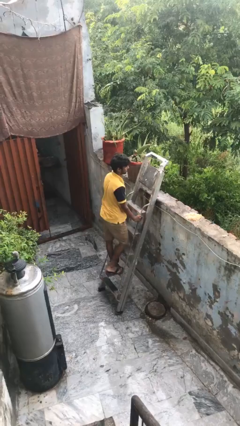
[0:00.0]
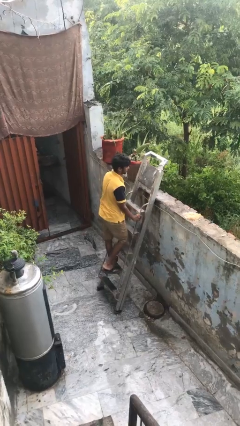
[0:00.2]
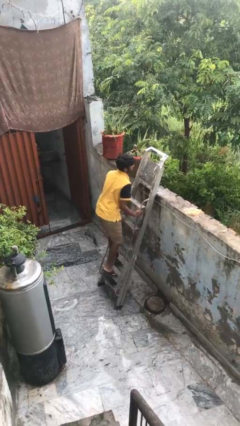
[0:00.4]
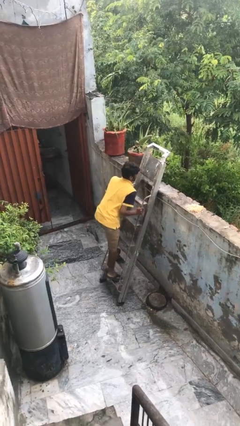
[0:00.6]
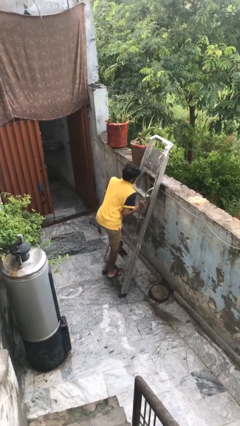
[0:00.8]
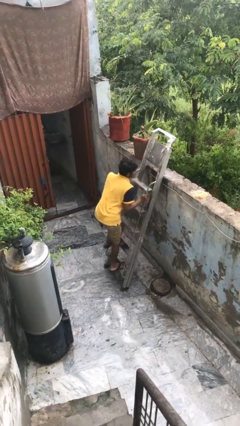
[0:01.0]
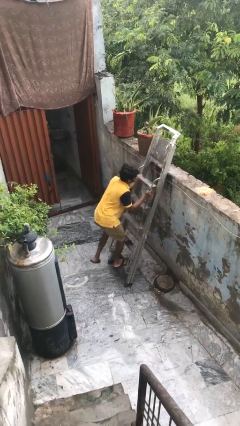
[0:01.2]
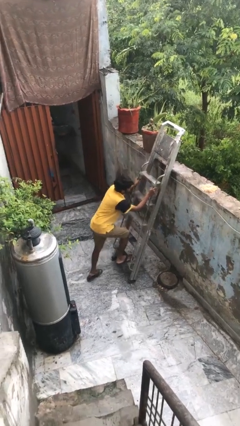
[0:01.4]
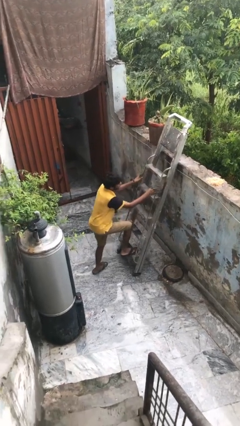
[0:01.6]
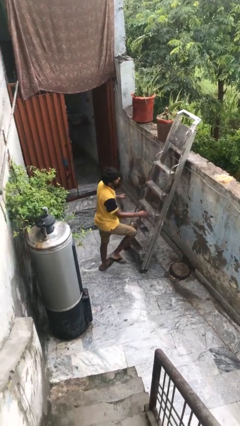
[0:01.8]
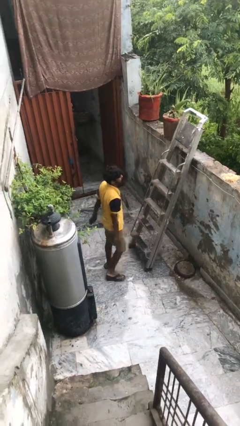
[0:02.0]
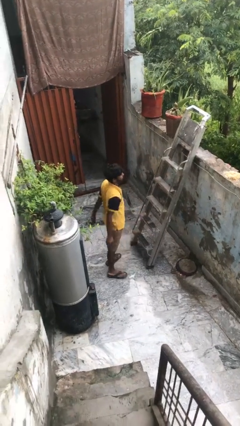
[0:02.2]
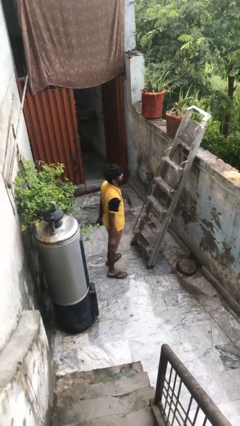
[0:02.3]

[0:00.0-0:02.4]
person climbs down ladder

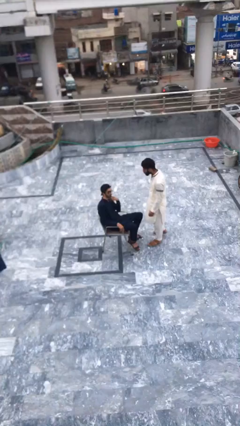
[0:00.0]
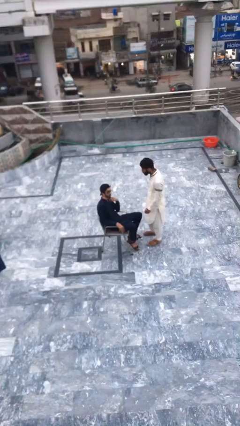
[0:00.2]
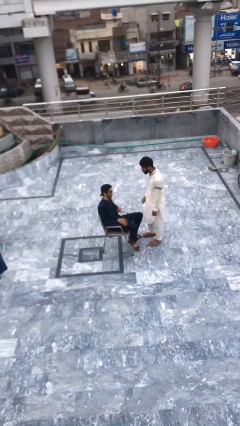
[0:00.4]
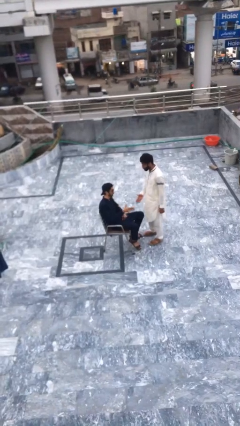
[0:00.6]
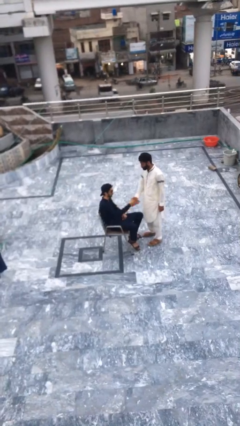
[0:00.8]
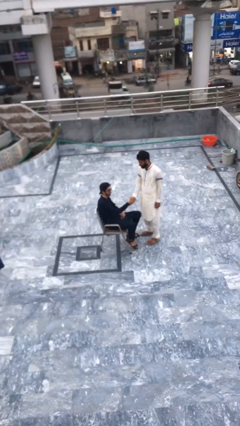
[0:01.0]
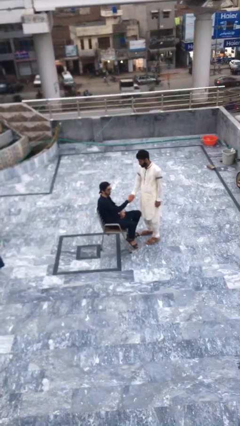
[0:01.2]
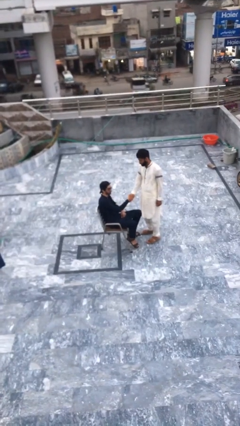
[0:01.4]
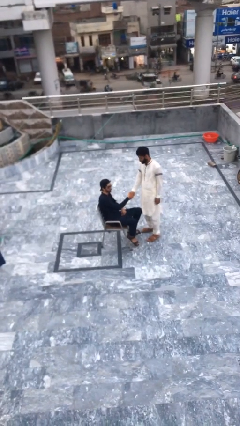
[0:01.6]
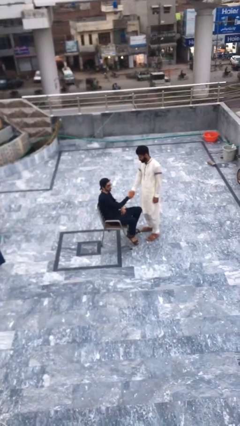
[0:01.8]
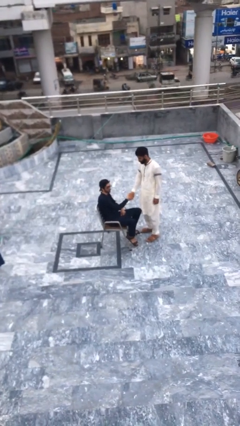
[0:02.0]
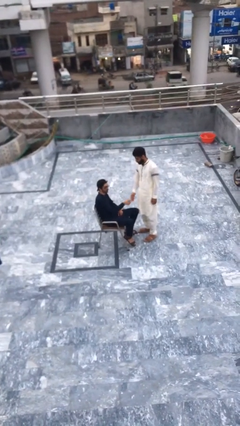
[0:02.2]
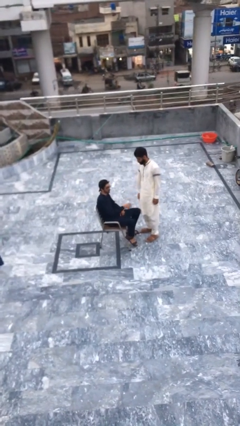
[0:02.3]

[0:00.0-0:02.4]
person shakes hand

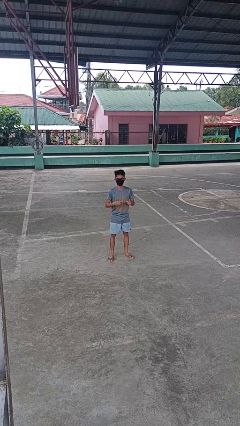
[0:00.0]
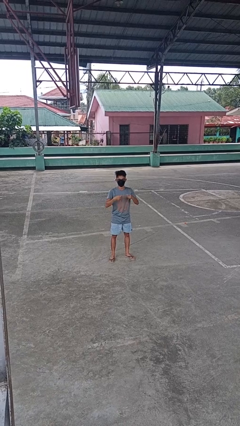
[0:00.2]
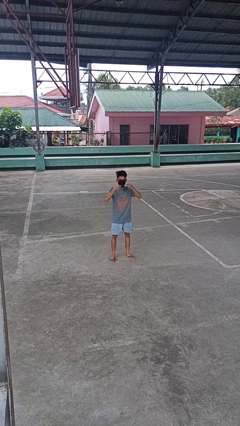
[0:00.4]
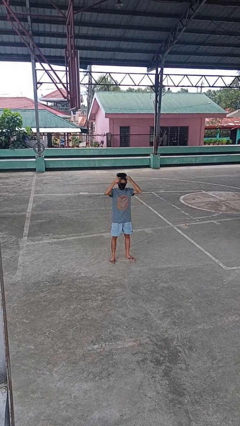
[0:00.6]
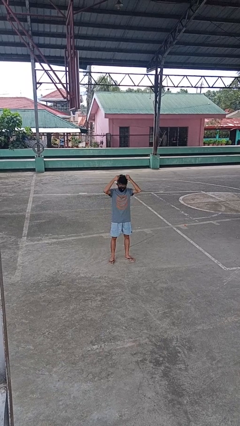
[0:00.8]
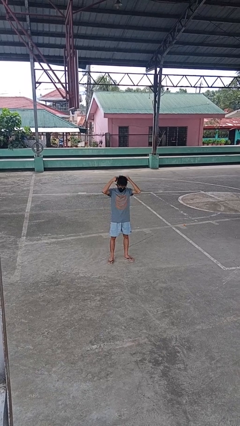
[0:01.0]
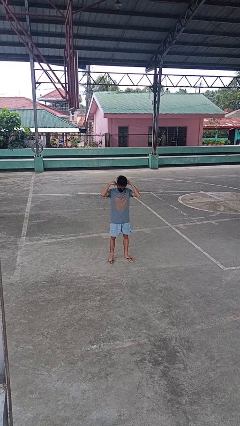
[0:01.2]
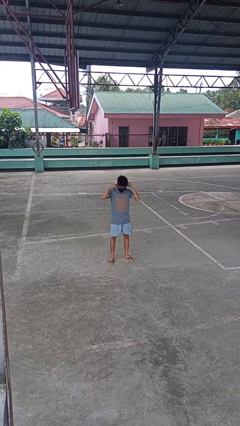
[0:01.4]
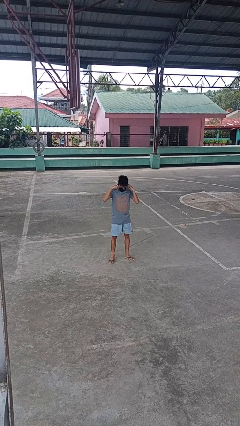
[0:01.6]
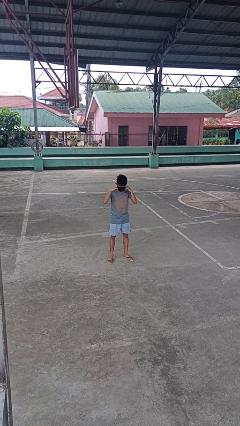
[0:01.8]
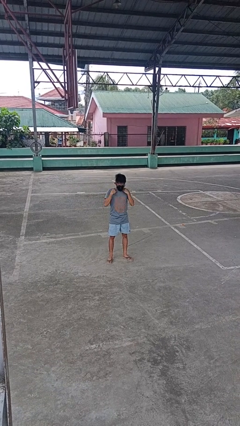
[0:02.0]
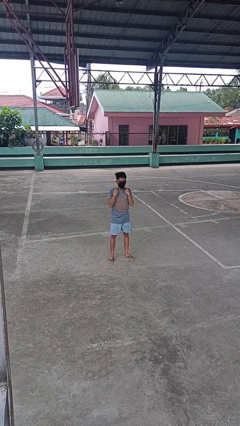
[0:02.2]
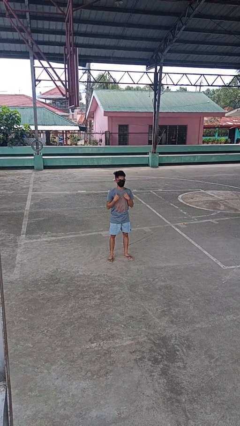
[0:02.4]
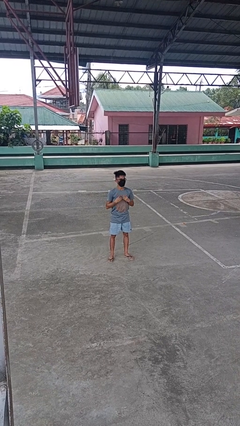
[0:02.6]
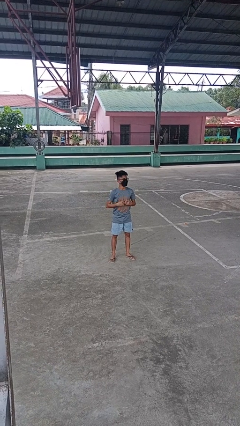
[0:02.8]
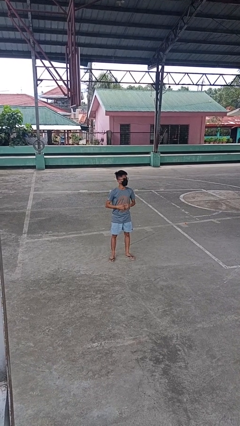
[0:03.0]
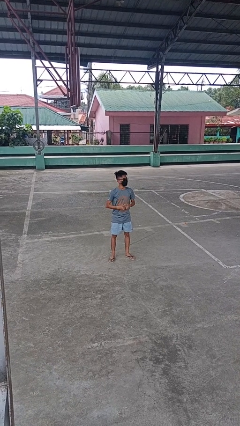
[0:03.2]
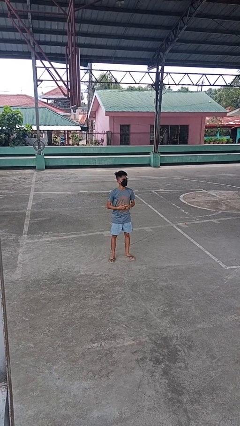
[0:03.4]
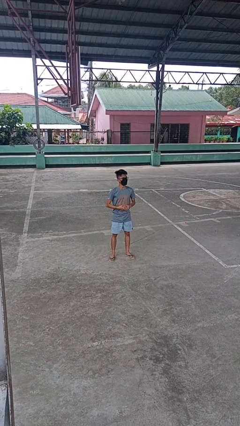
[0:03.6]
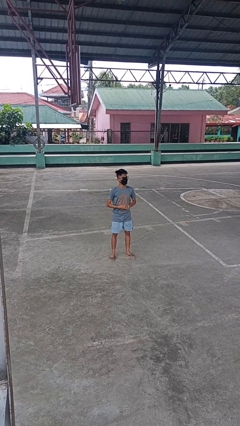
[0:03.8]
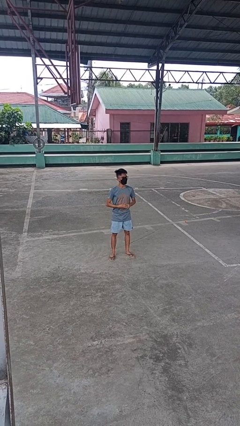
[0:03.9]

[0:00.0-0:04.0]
person puts on necklace

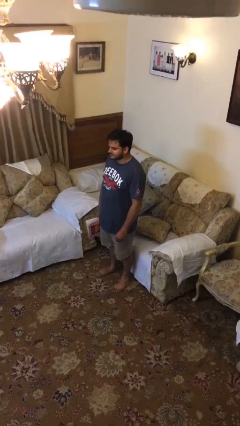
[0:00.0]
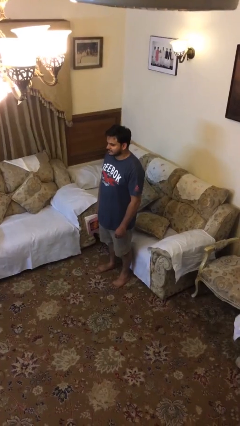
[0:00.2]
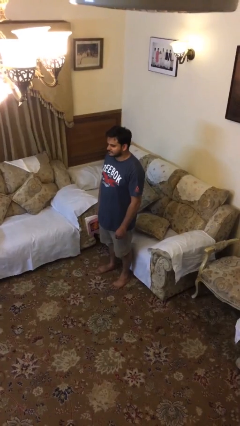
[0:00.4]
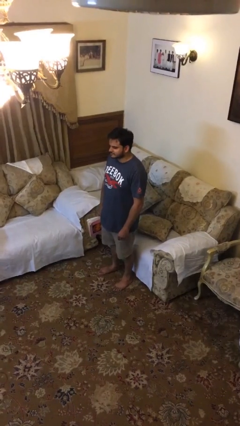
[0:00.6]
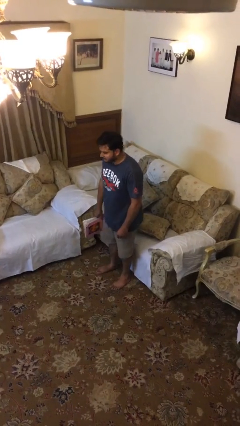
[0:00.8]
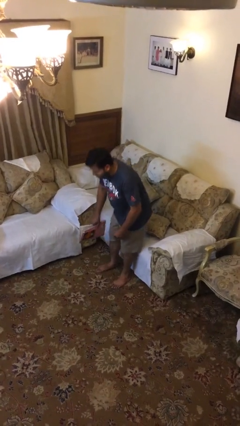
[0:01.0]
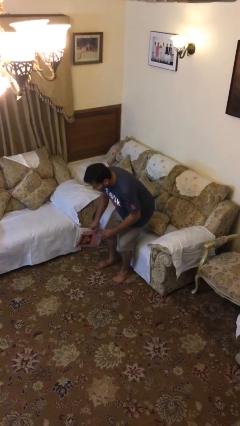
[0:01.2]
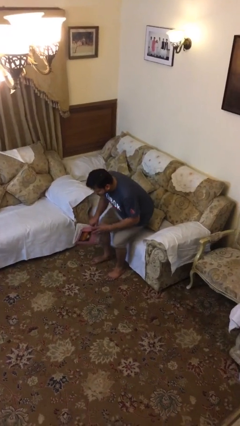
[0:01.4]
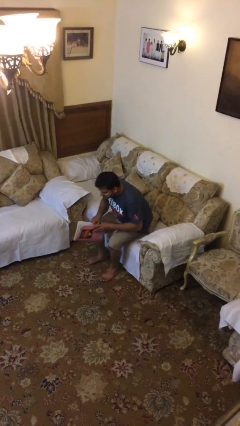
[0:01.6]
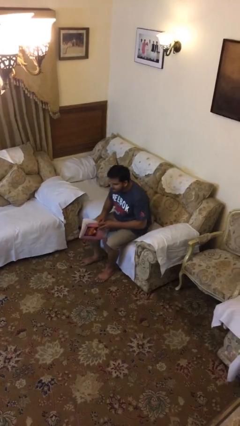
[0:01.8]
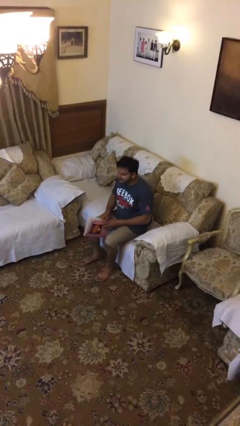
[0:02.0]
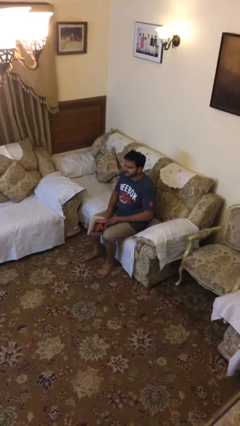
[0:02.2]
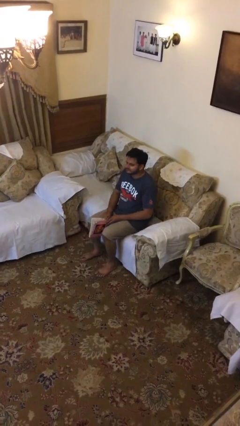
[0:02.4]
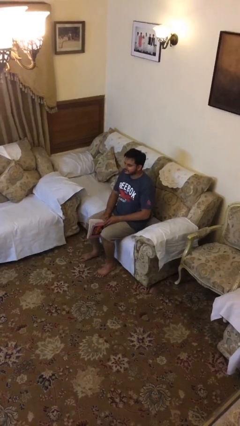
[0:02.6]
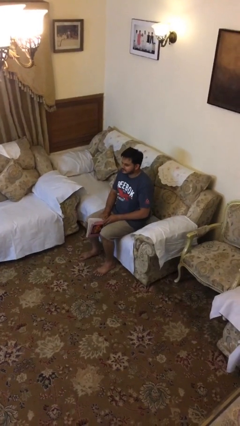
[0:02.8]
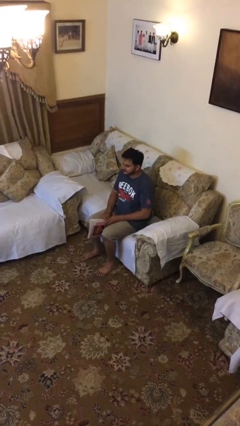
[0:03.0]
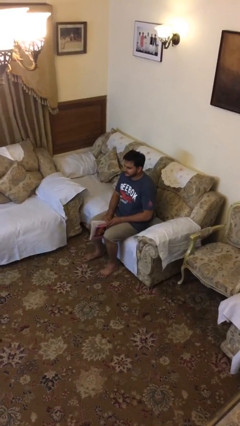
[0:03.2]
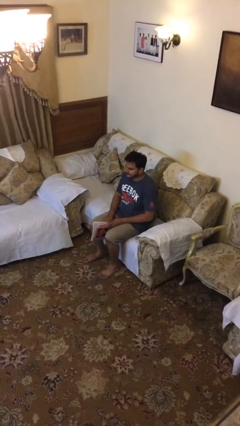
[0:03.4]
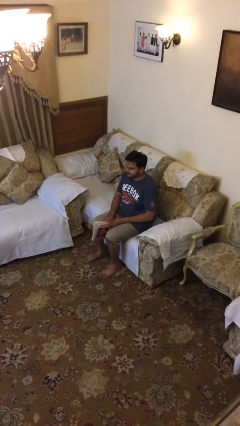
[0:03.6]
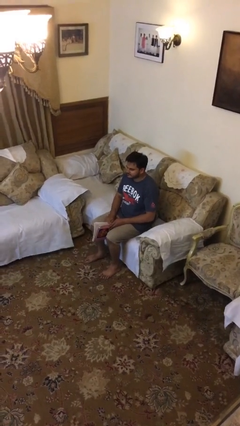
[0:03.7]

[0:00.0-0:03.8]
person sits down

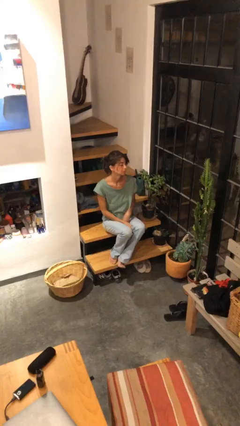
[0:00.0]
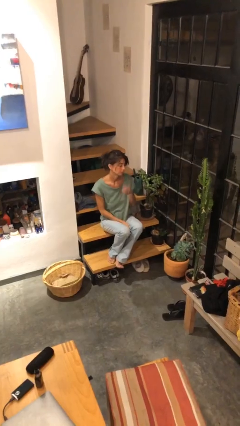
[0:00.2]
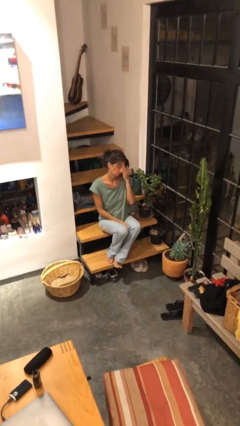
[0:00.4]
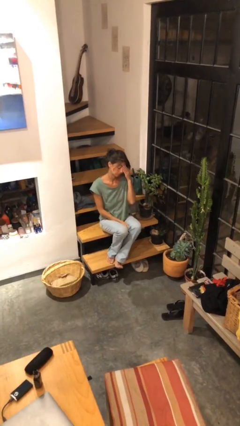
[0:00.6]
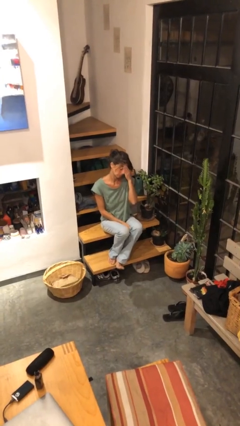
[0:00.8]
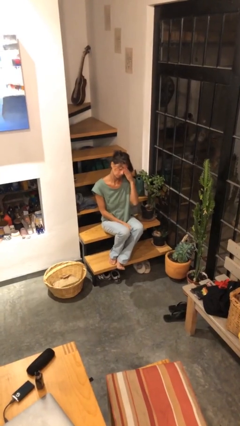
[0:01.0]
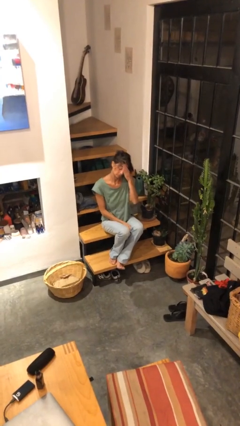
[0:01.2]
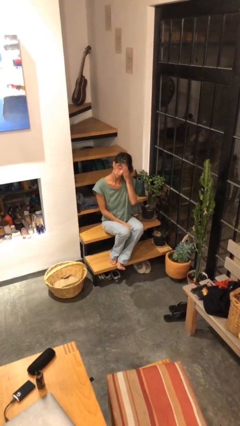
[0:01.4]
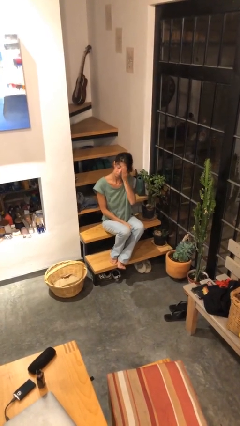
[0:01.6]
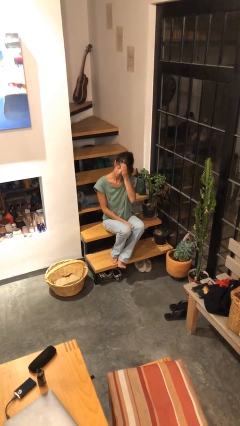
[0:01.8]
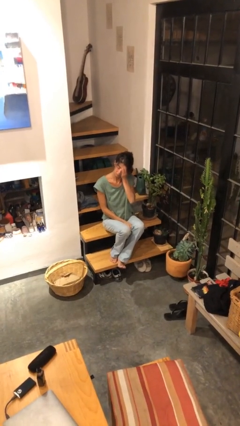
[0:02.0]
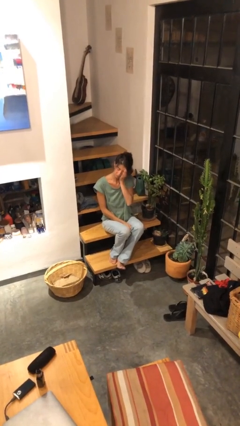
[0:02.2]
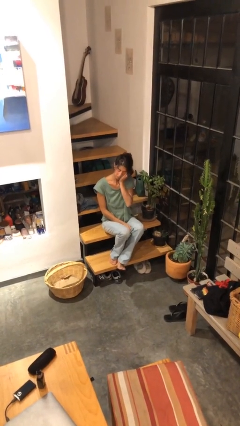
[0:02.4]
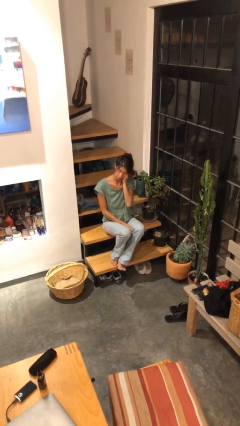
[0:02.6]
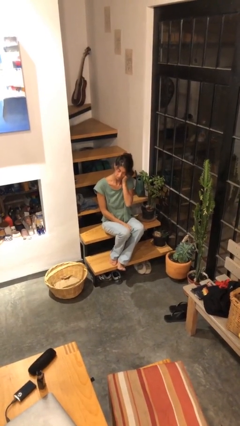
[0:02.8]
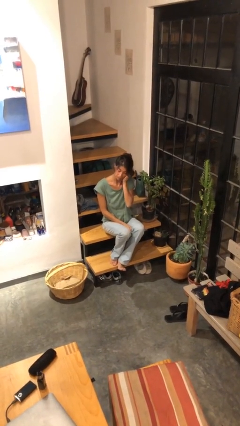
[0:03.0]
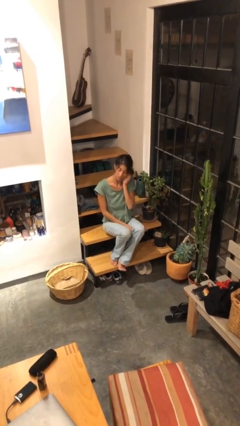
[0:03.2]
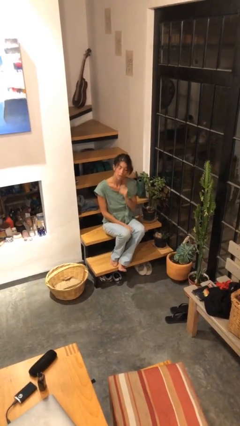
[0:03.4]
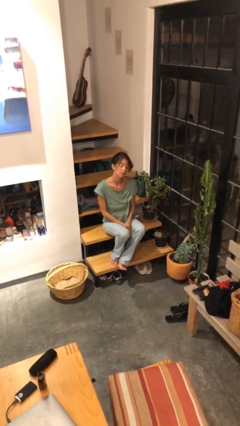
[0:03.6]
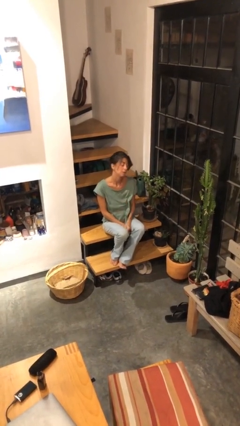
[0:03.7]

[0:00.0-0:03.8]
person scratches face

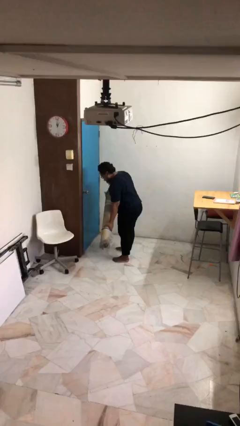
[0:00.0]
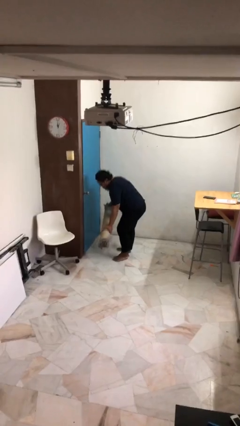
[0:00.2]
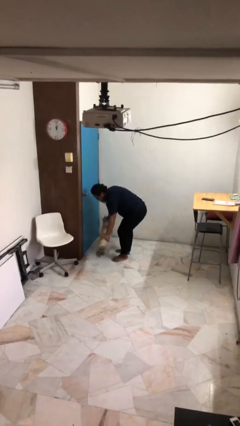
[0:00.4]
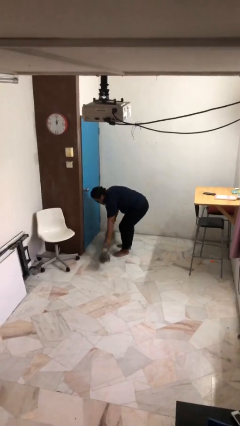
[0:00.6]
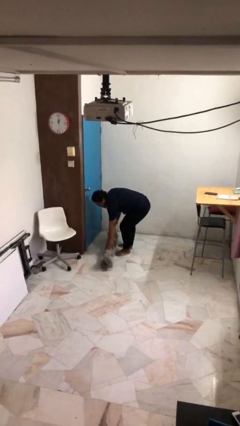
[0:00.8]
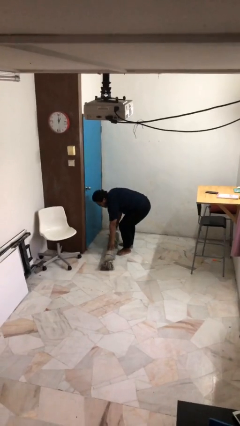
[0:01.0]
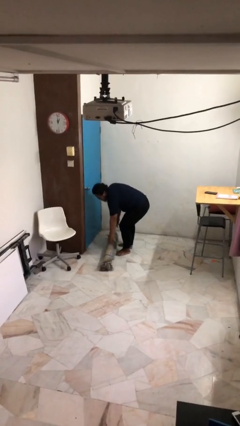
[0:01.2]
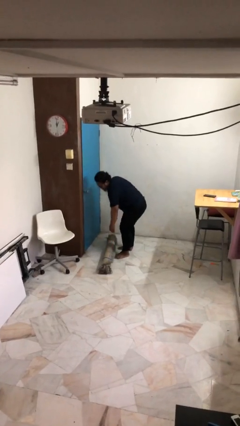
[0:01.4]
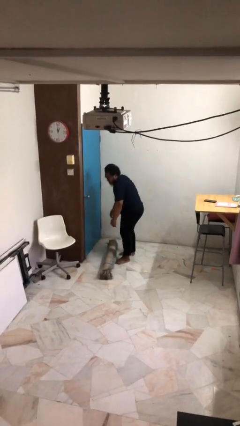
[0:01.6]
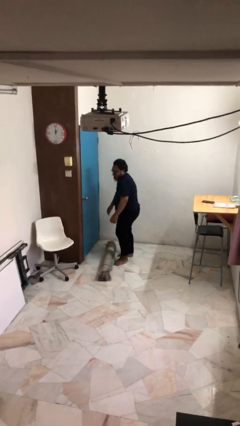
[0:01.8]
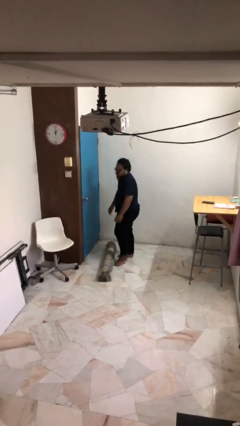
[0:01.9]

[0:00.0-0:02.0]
person puts down object on floor
